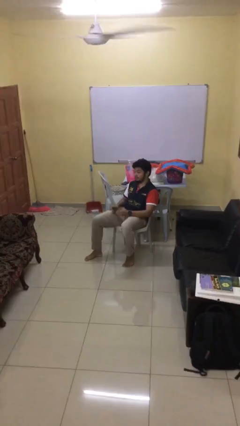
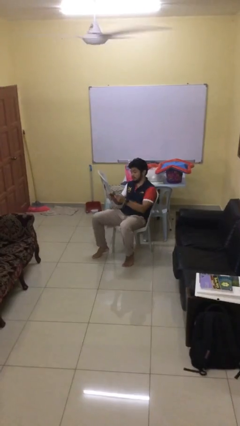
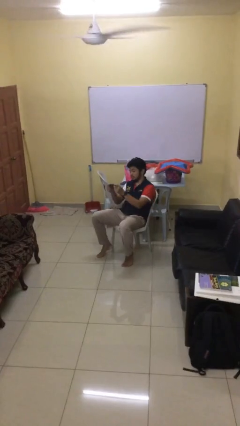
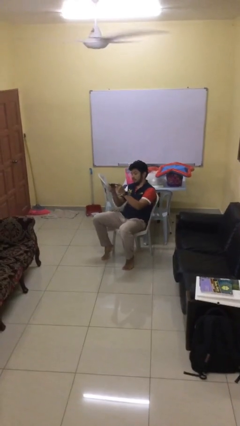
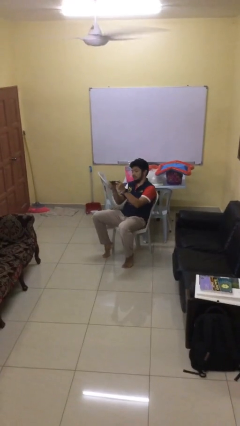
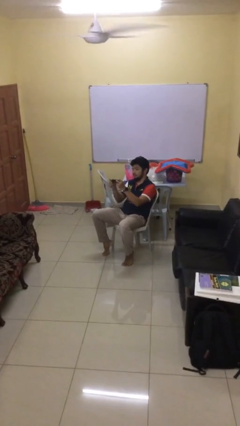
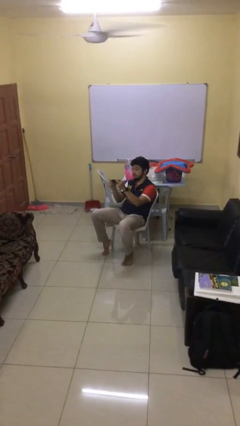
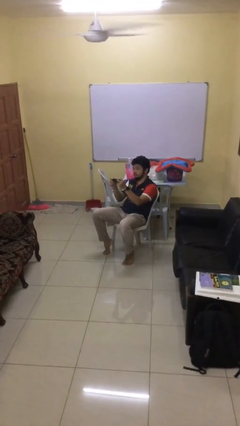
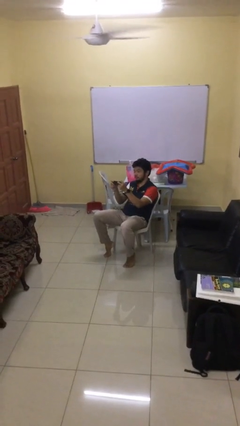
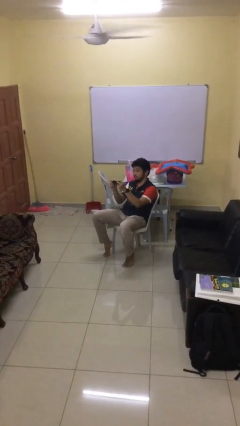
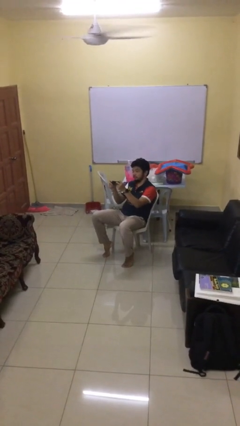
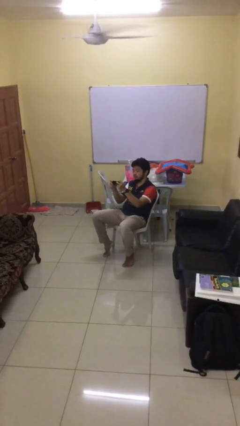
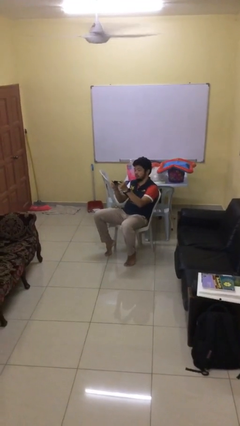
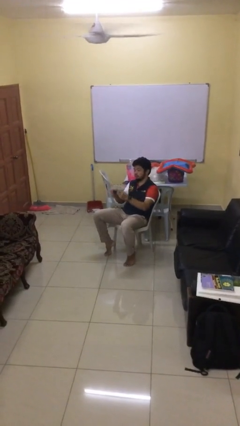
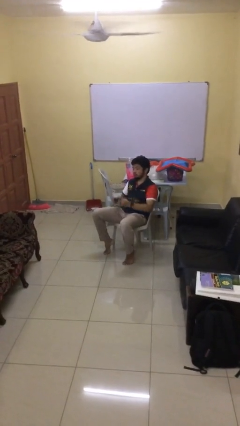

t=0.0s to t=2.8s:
person interacts with handheld game

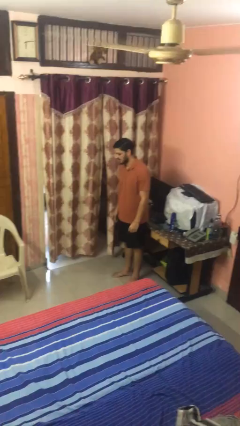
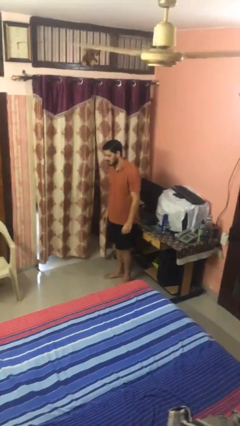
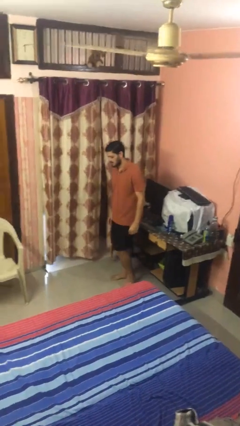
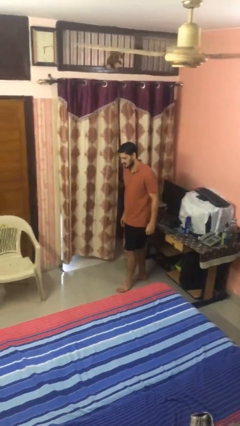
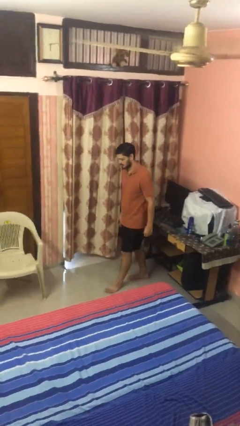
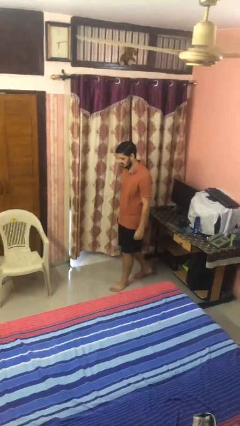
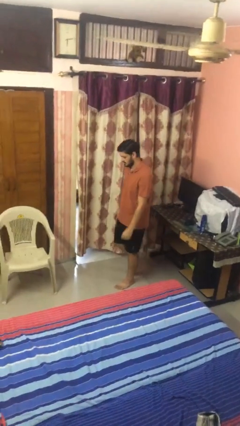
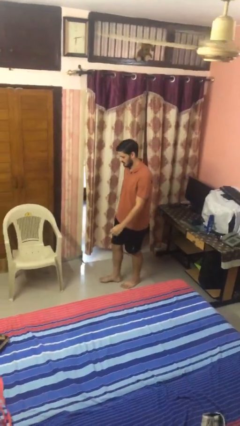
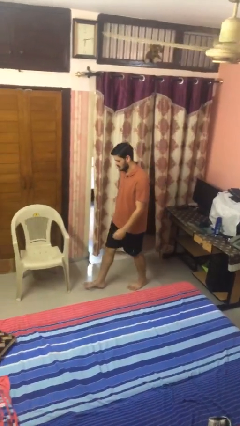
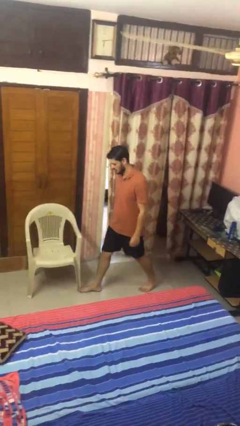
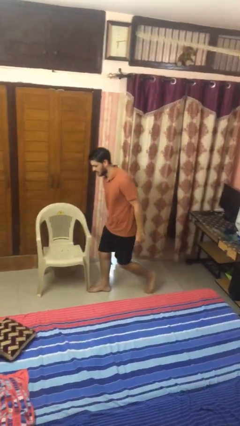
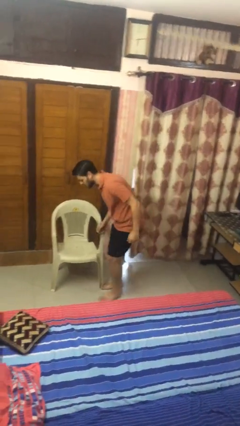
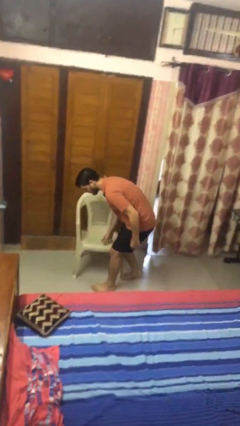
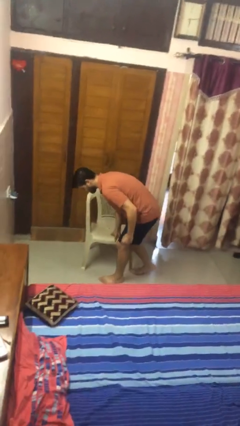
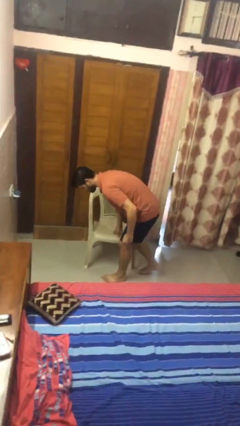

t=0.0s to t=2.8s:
person stubs toe

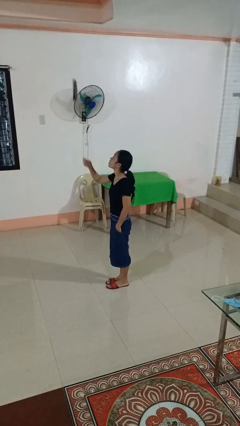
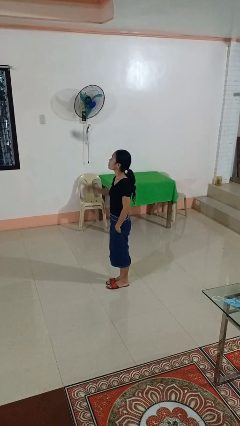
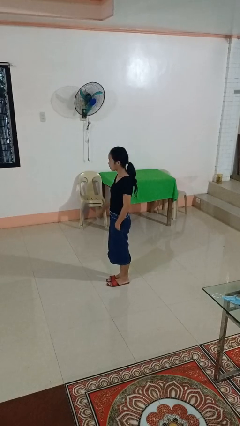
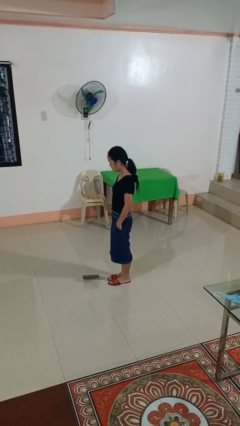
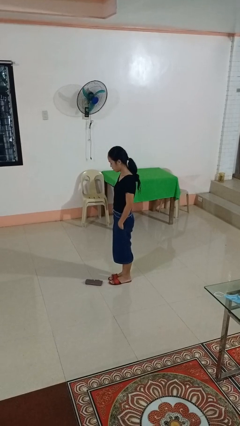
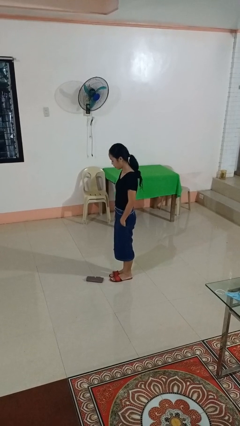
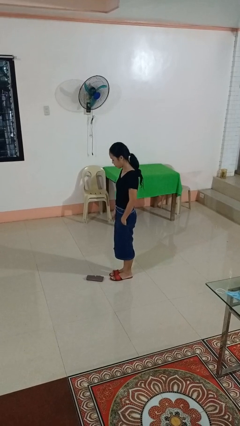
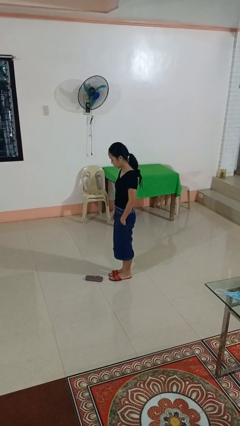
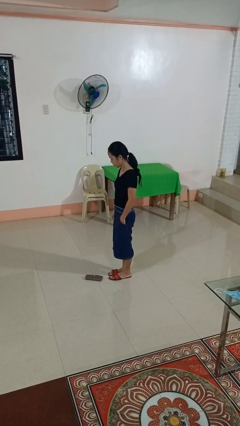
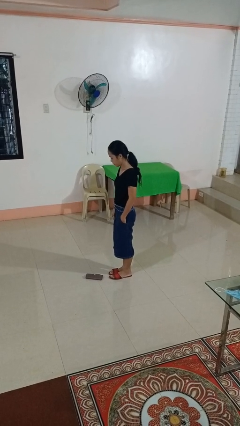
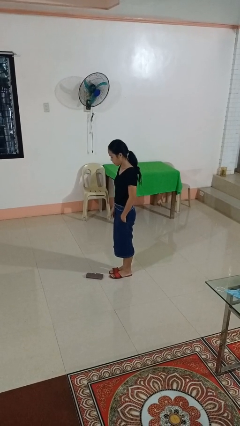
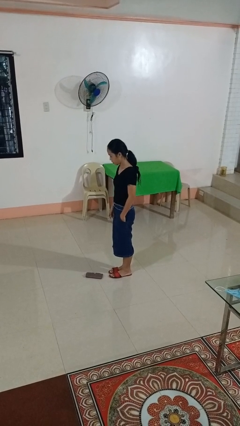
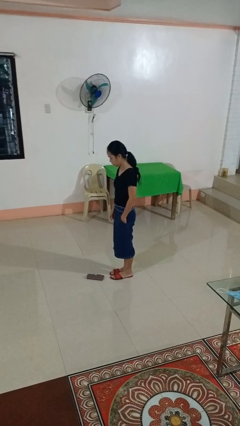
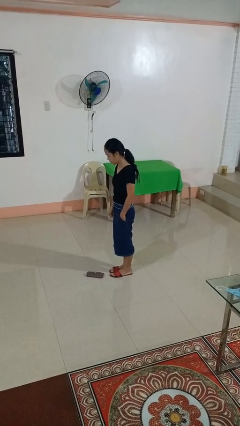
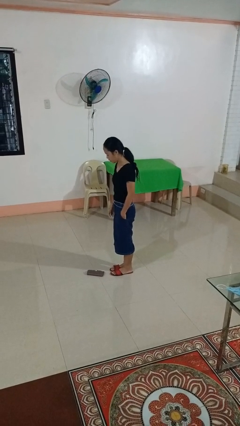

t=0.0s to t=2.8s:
person throws object into air

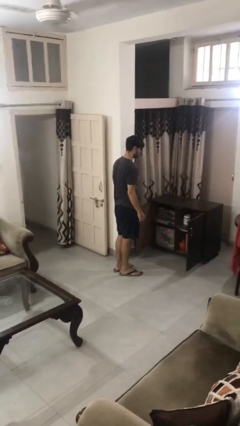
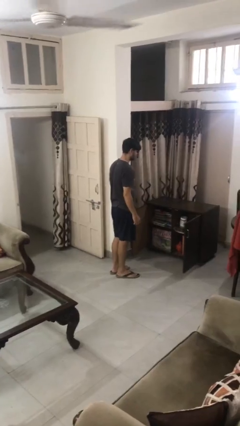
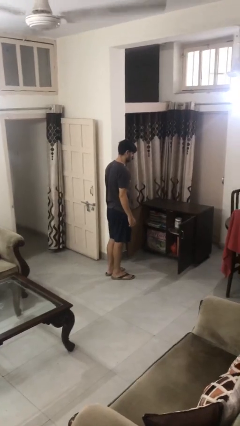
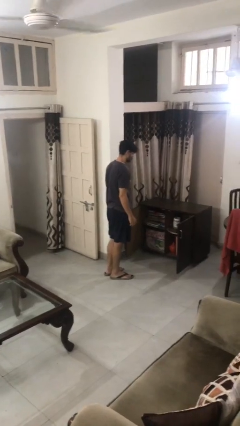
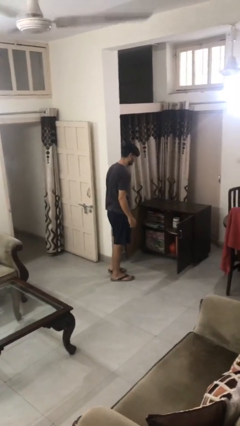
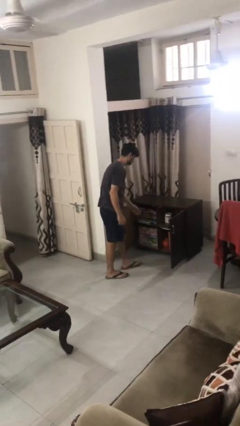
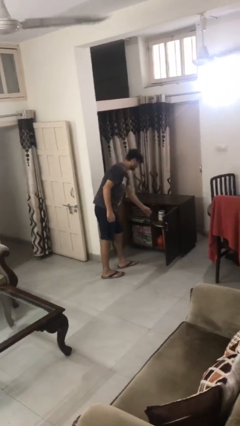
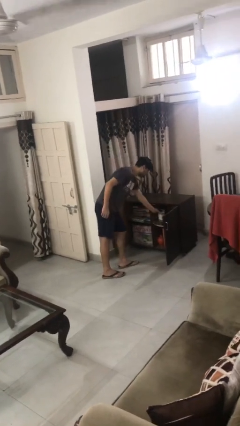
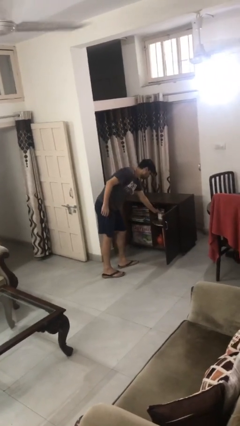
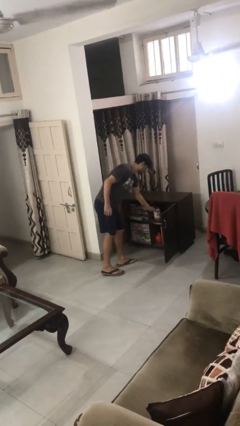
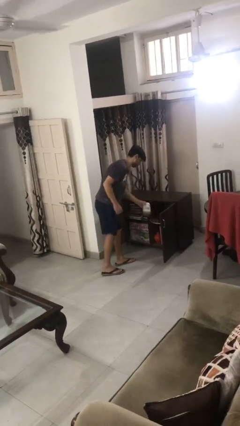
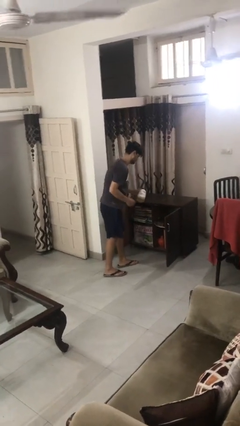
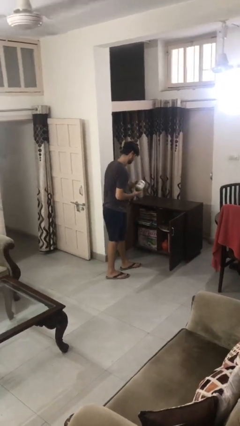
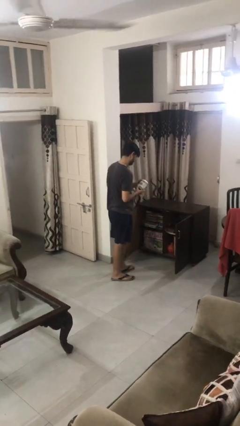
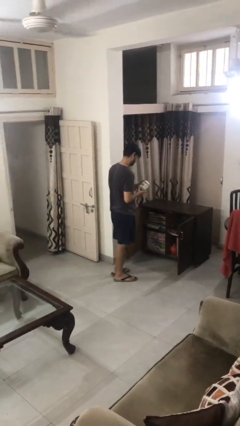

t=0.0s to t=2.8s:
person picks up object from cabinet

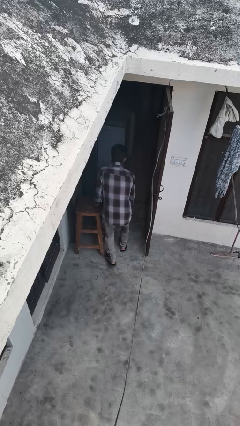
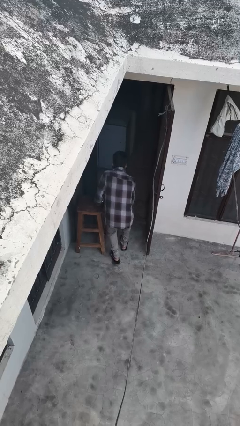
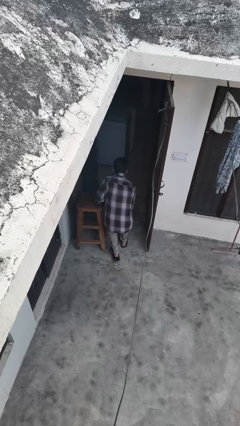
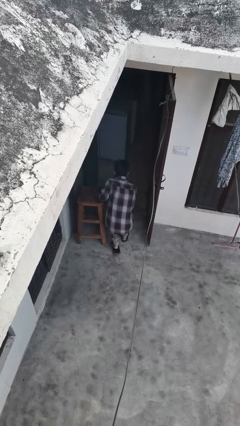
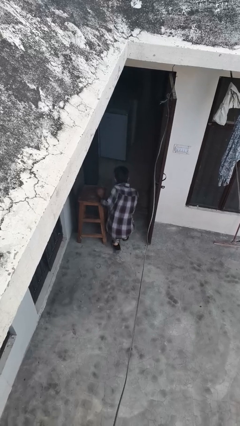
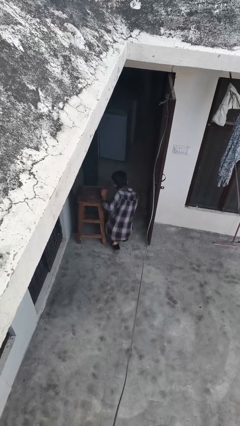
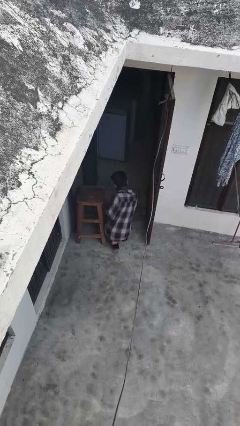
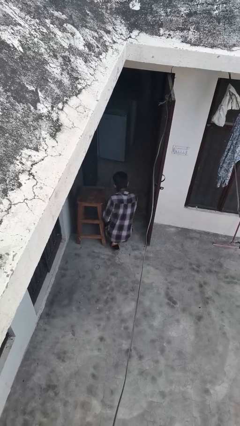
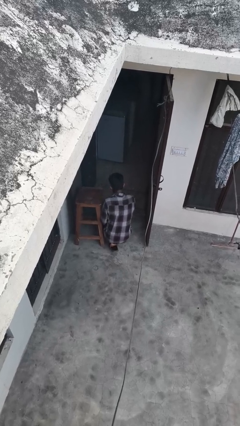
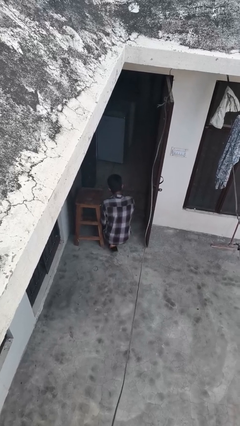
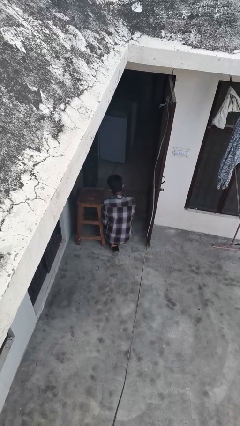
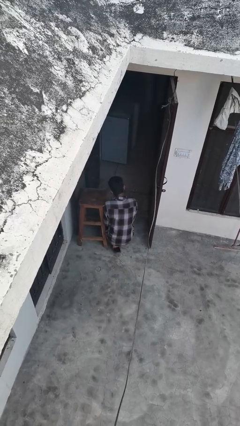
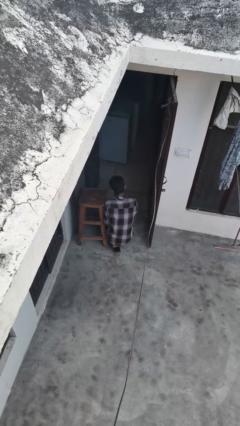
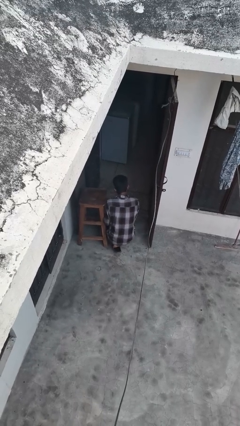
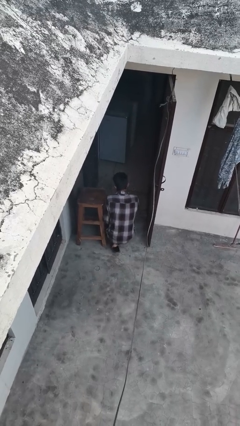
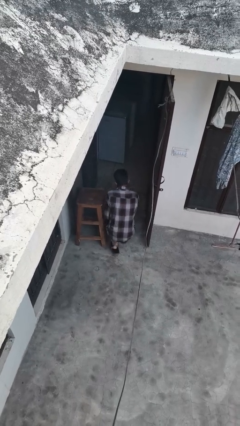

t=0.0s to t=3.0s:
person trips on object on floor

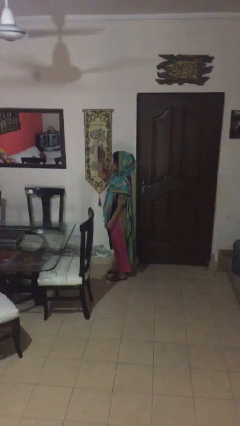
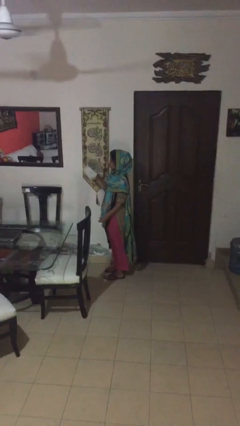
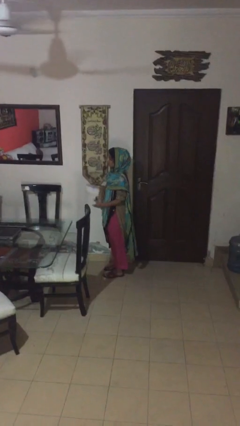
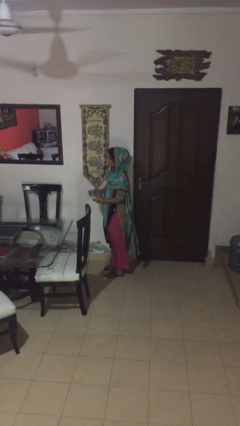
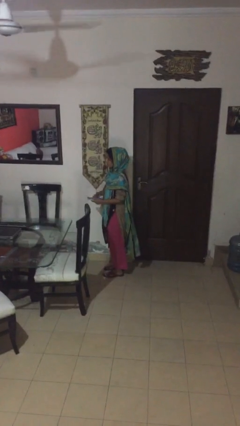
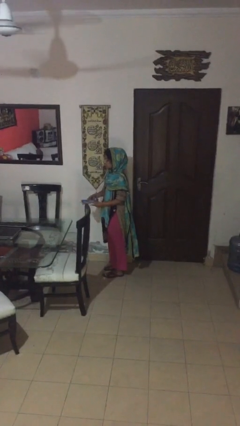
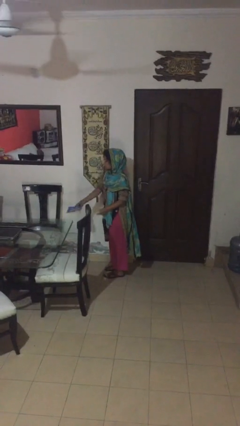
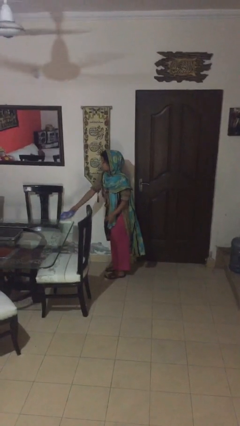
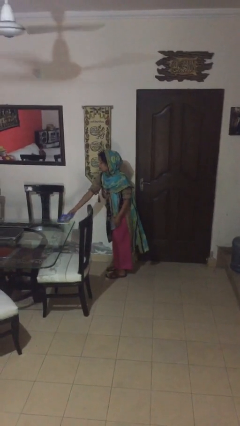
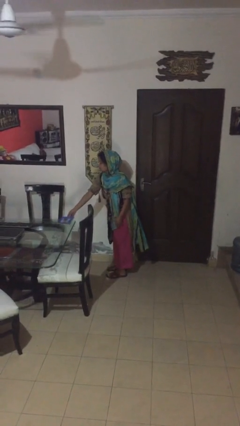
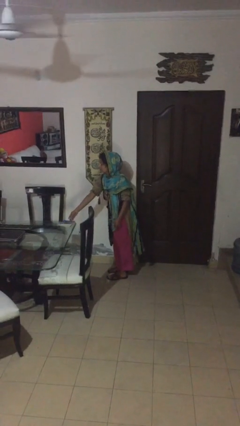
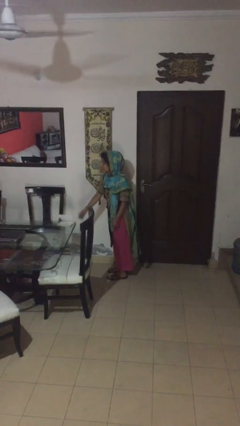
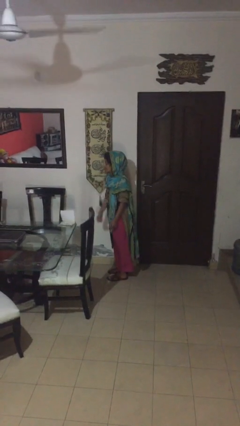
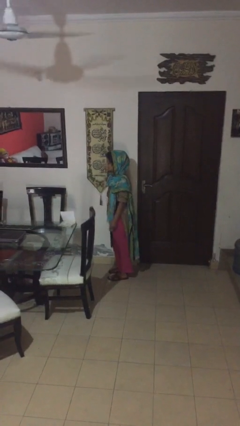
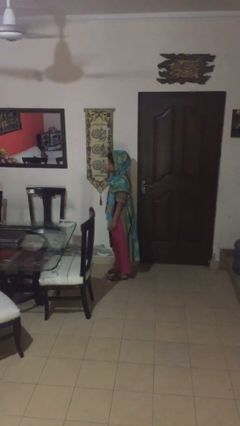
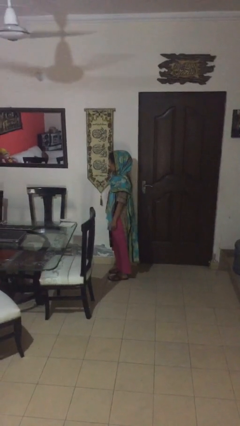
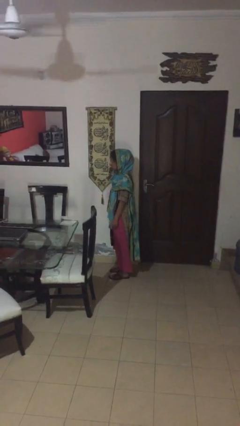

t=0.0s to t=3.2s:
person puts down object on table
